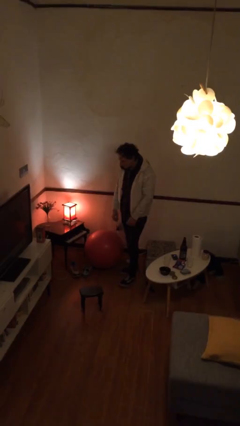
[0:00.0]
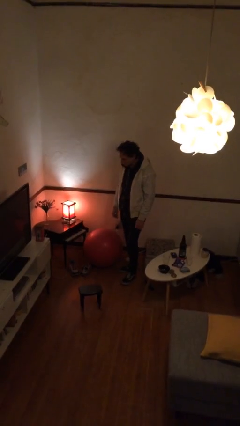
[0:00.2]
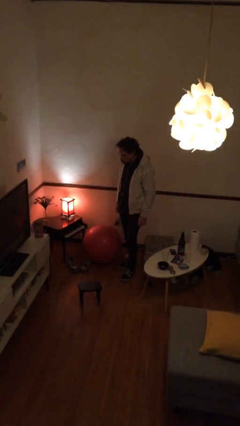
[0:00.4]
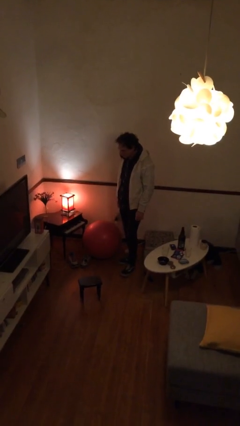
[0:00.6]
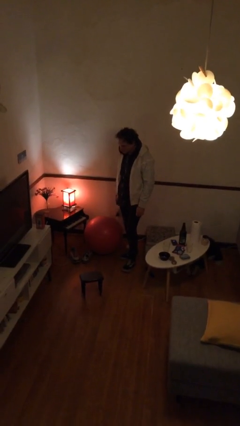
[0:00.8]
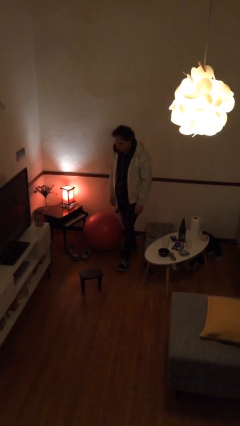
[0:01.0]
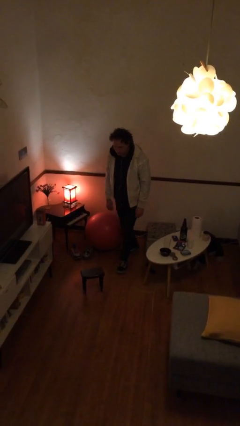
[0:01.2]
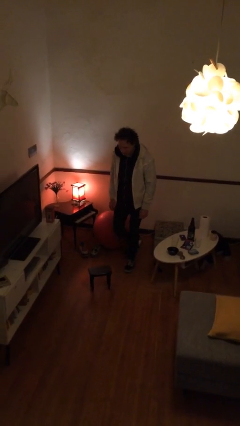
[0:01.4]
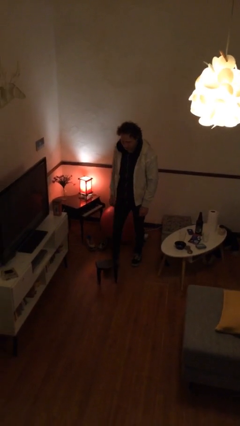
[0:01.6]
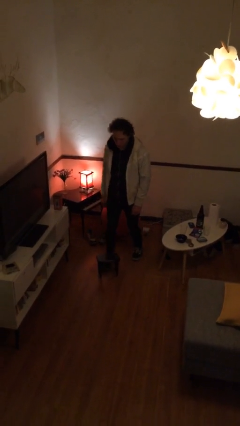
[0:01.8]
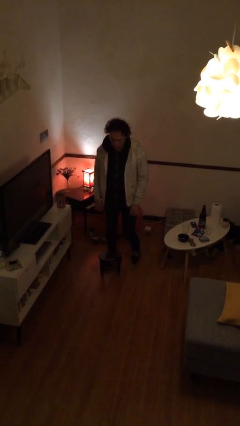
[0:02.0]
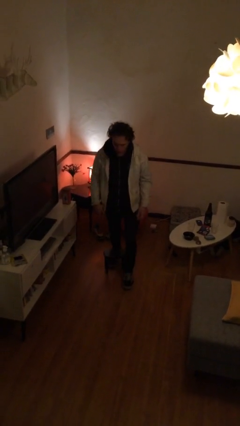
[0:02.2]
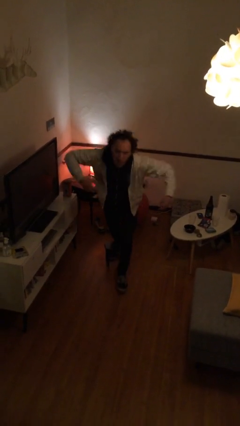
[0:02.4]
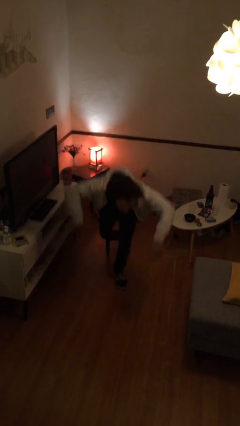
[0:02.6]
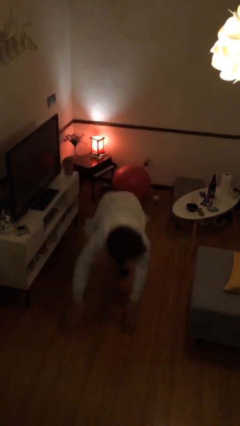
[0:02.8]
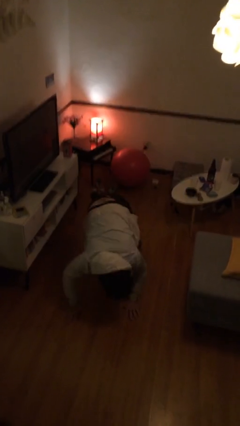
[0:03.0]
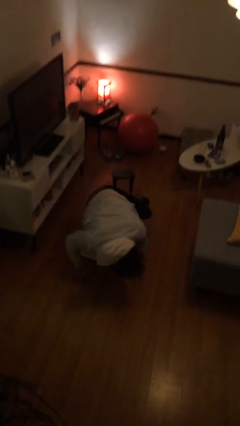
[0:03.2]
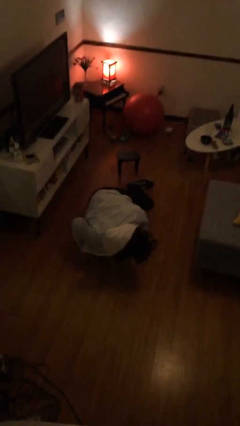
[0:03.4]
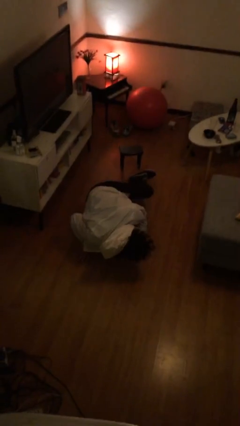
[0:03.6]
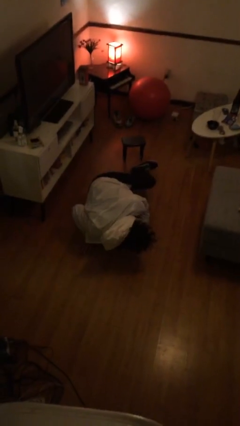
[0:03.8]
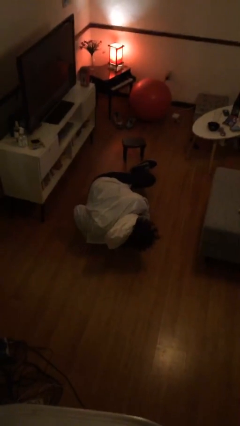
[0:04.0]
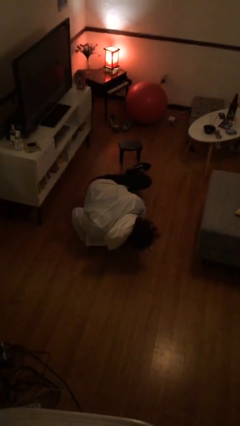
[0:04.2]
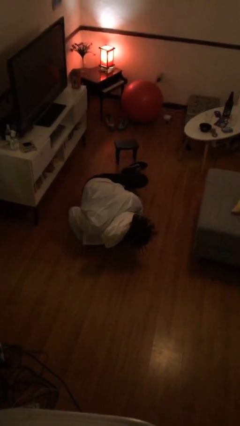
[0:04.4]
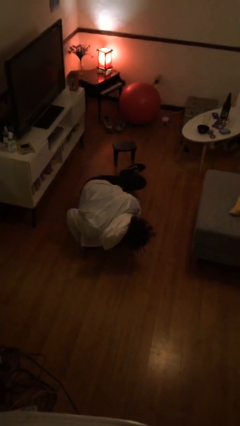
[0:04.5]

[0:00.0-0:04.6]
person trips on object on floor

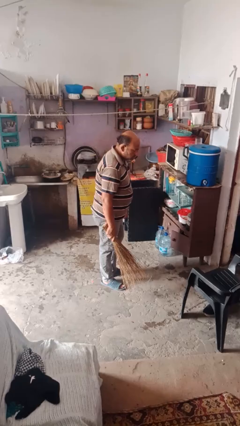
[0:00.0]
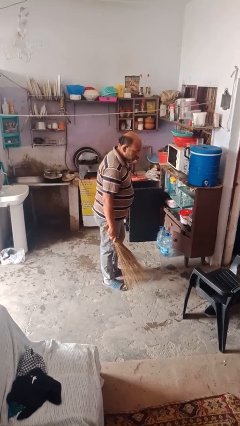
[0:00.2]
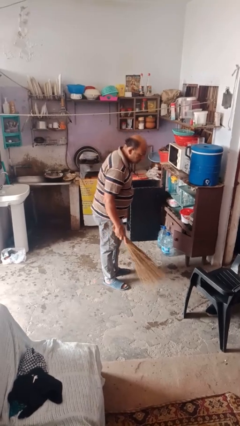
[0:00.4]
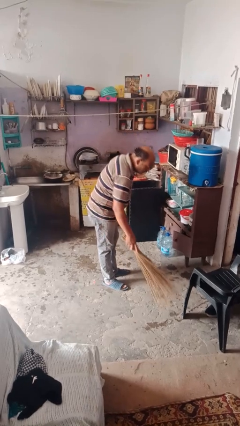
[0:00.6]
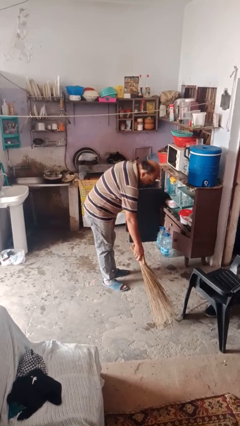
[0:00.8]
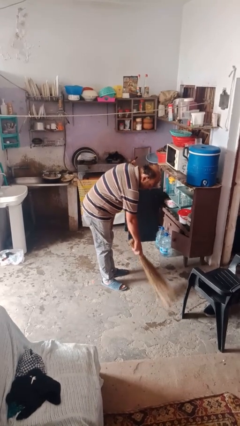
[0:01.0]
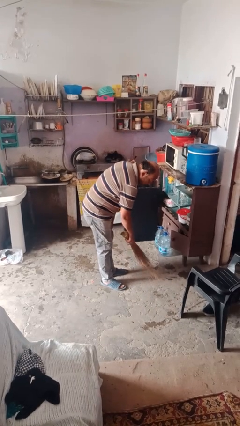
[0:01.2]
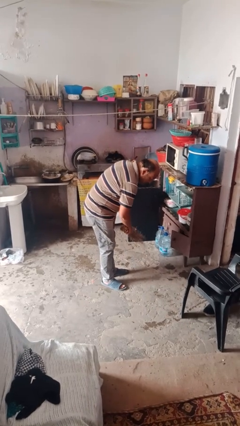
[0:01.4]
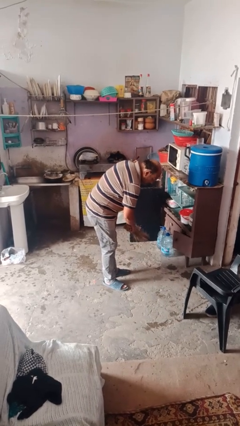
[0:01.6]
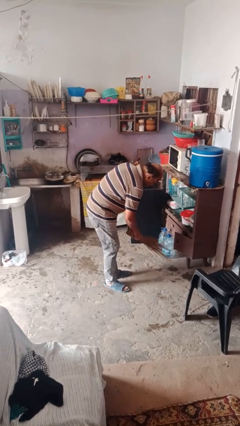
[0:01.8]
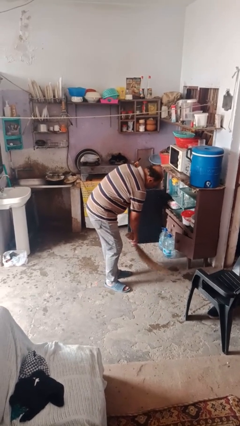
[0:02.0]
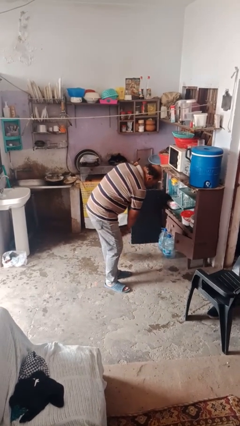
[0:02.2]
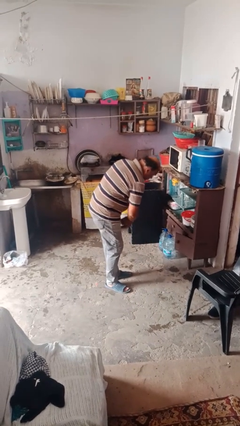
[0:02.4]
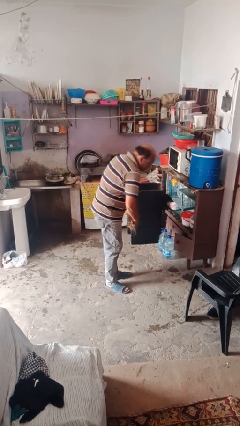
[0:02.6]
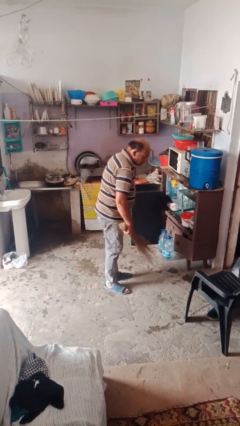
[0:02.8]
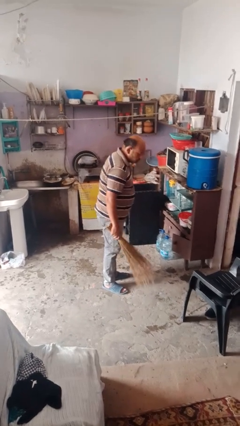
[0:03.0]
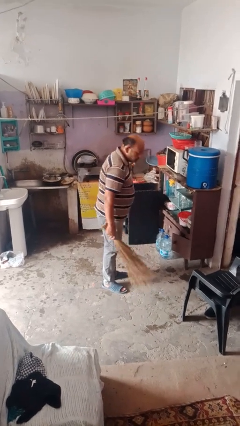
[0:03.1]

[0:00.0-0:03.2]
person sweeps floor

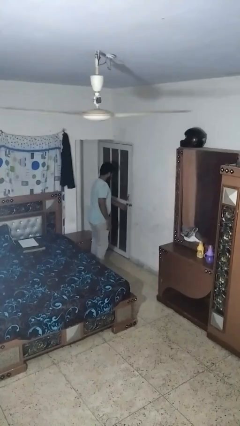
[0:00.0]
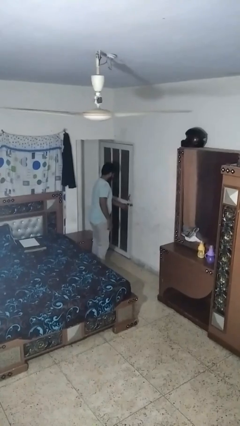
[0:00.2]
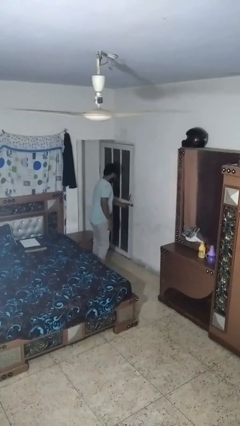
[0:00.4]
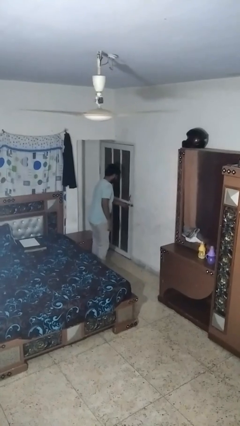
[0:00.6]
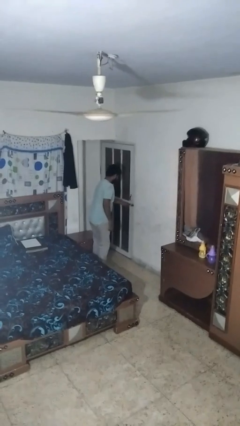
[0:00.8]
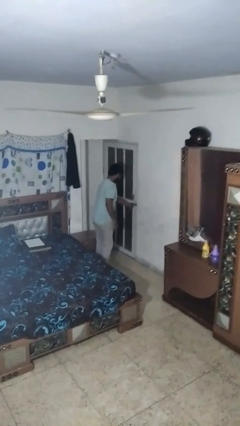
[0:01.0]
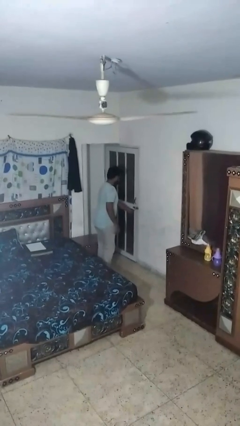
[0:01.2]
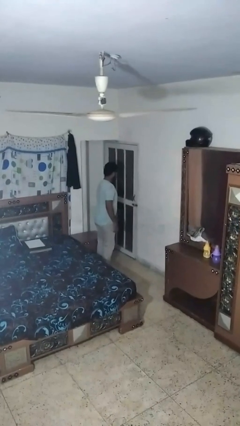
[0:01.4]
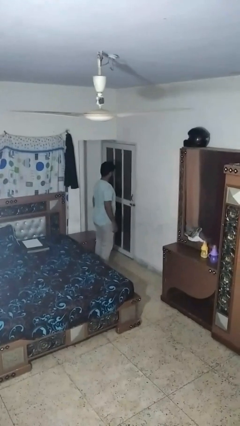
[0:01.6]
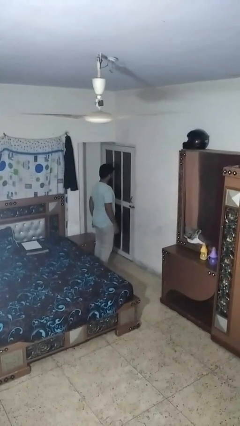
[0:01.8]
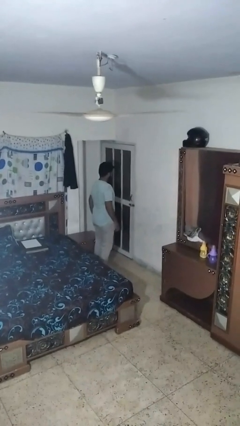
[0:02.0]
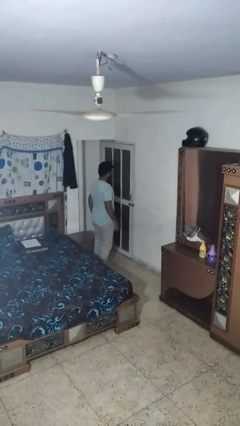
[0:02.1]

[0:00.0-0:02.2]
person locks door with keys

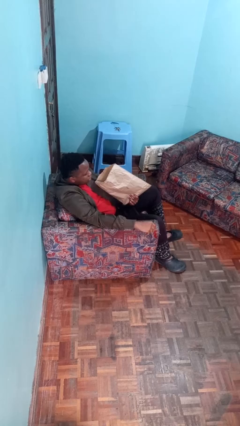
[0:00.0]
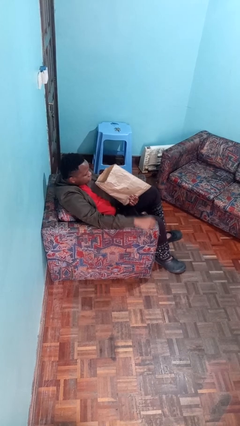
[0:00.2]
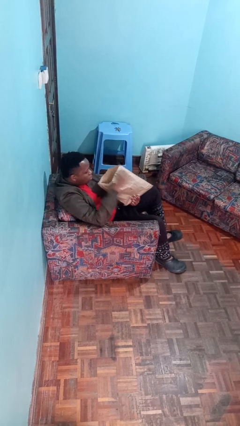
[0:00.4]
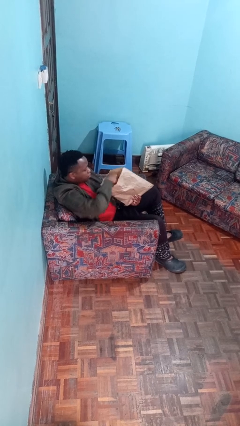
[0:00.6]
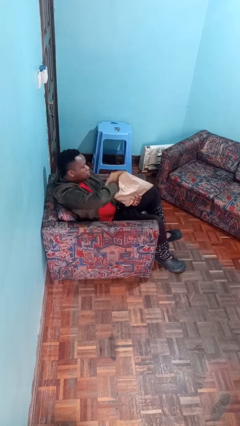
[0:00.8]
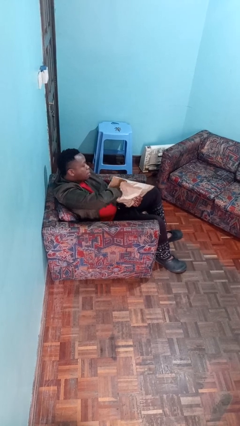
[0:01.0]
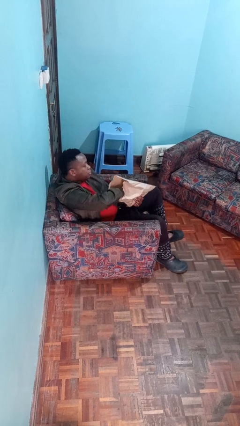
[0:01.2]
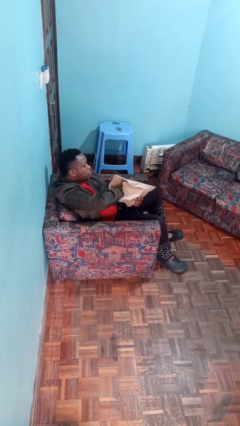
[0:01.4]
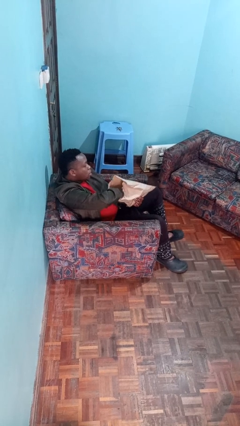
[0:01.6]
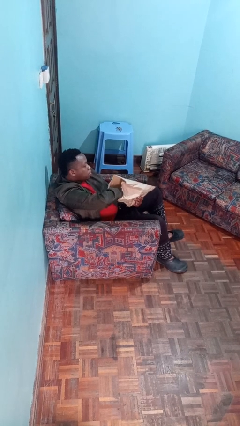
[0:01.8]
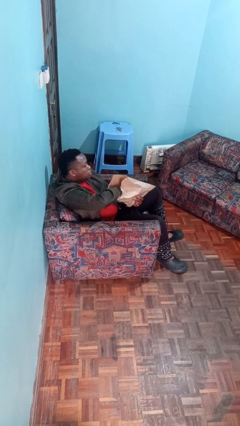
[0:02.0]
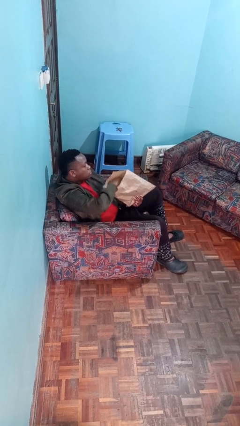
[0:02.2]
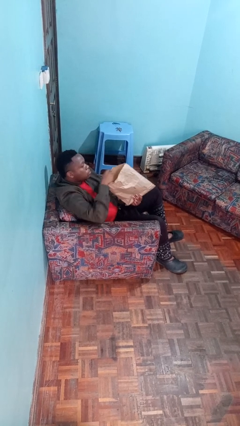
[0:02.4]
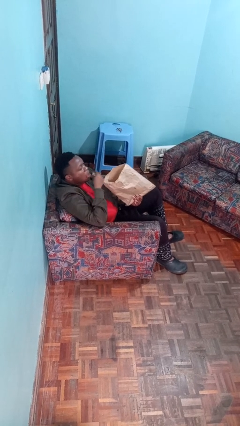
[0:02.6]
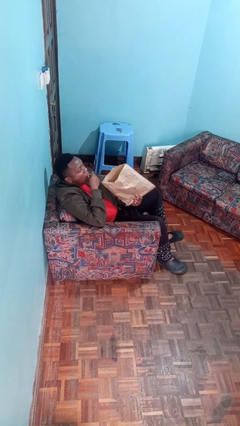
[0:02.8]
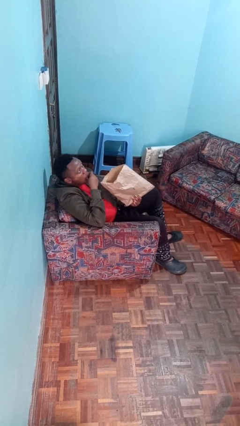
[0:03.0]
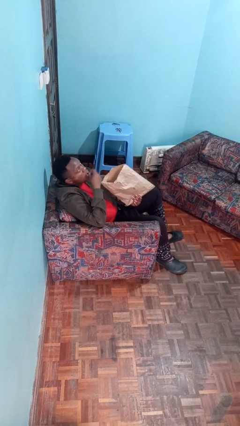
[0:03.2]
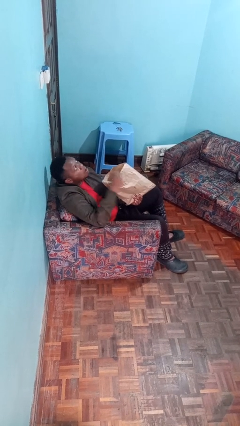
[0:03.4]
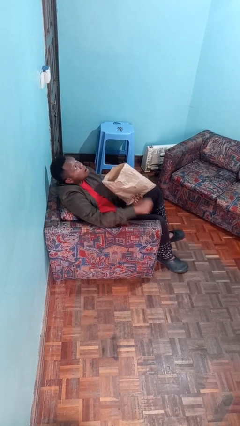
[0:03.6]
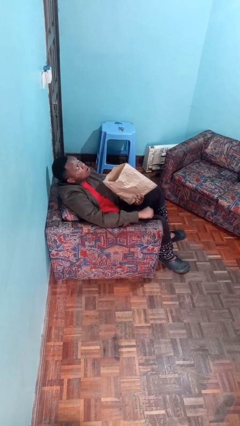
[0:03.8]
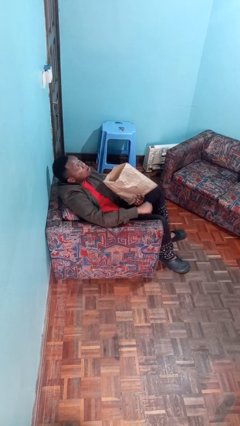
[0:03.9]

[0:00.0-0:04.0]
person eats snack from bag

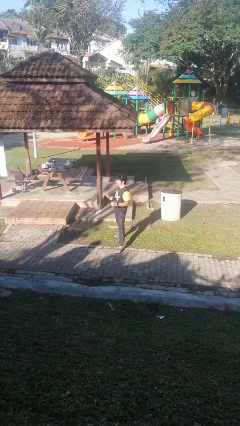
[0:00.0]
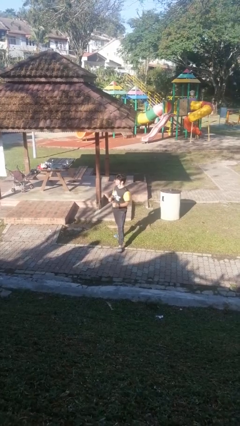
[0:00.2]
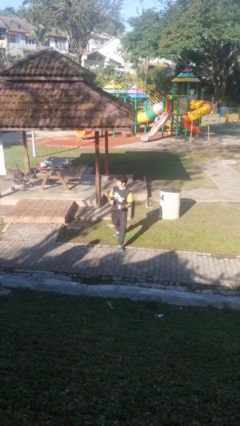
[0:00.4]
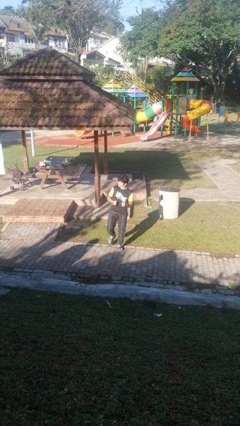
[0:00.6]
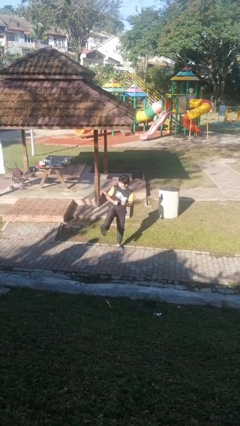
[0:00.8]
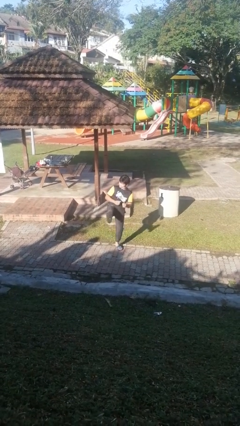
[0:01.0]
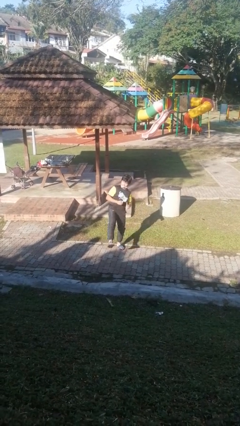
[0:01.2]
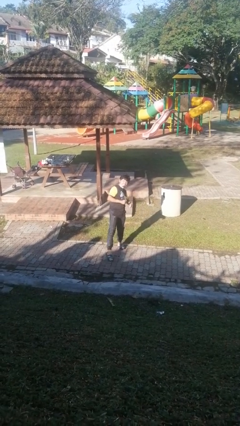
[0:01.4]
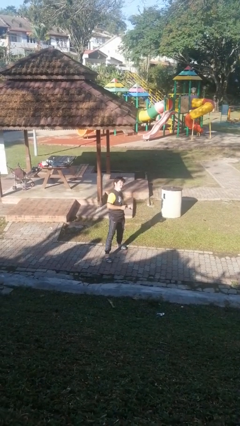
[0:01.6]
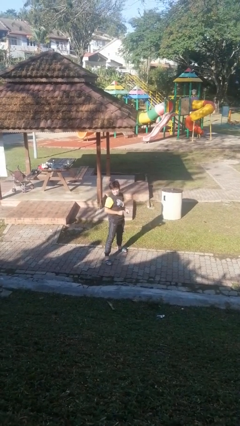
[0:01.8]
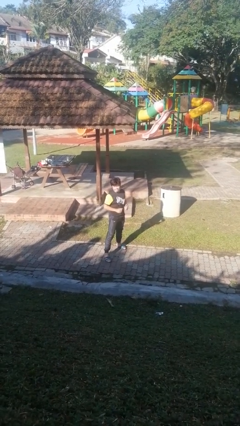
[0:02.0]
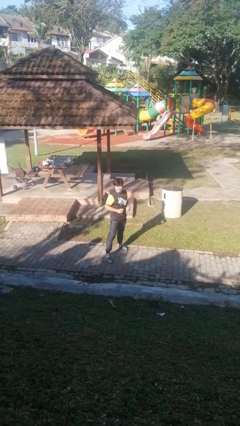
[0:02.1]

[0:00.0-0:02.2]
person karate kicks

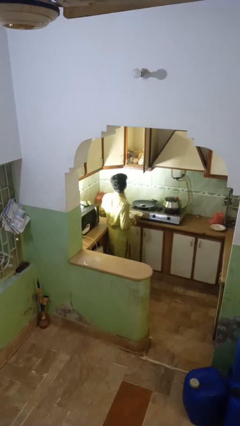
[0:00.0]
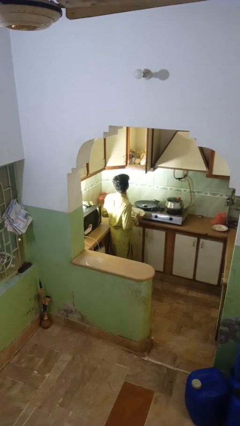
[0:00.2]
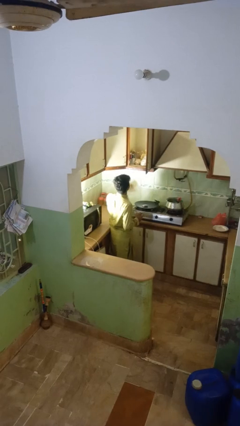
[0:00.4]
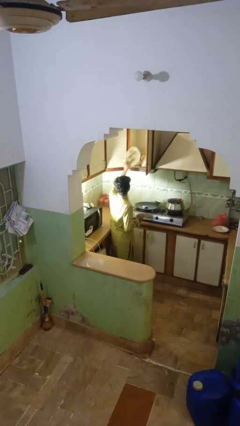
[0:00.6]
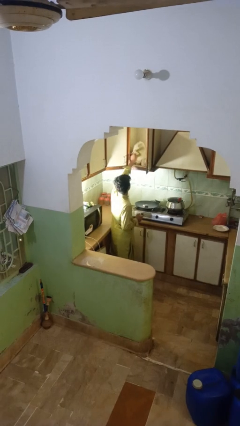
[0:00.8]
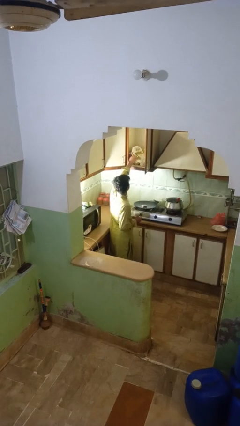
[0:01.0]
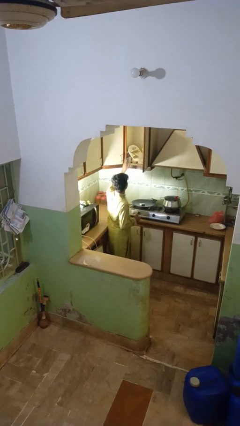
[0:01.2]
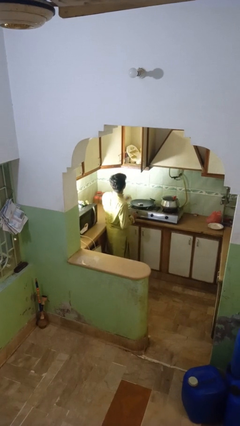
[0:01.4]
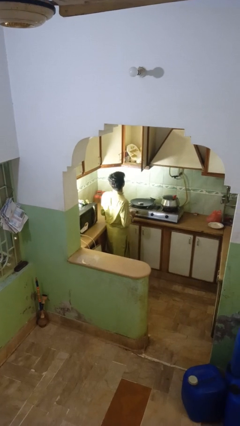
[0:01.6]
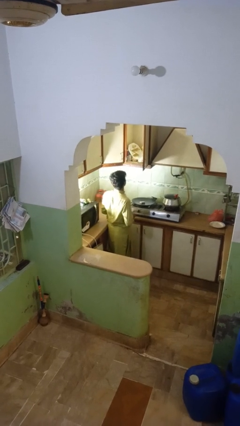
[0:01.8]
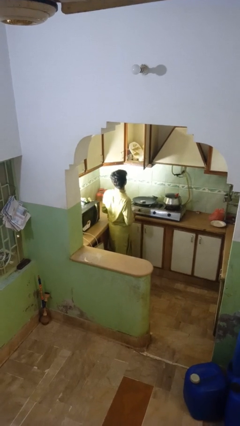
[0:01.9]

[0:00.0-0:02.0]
person puts object in cabinet
